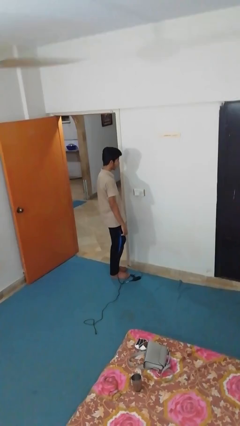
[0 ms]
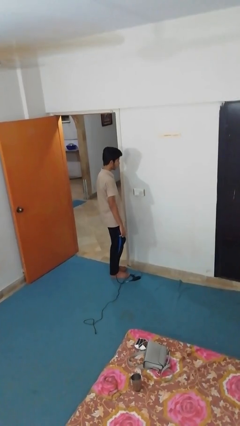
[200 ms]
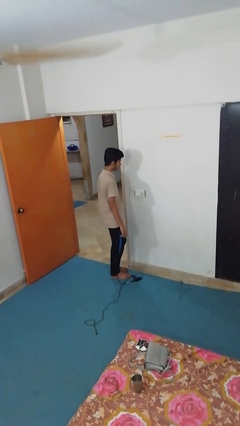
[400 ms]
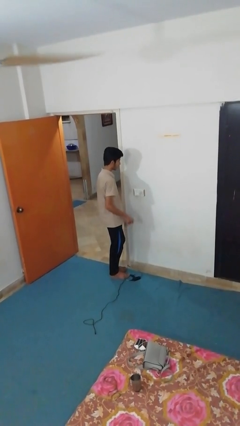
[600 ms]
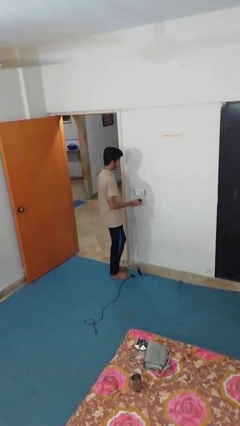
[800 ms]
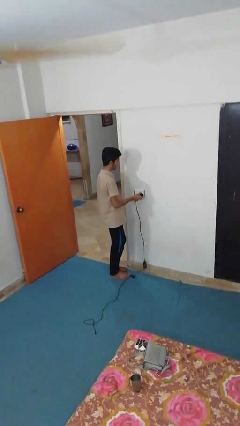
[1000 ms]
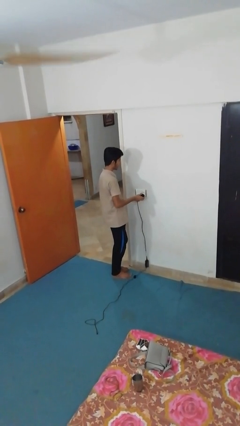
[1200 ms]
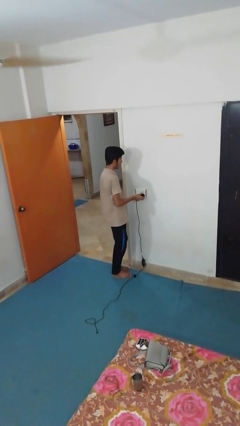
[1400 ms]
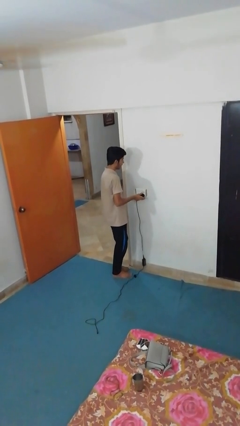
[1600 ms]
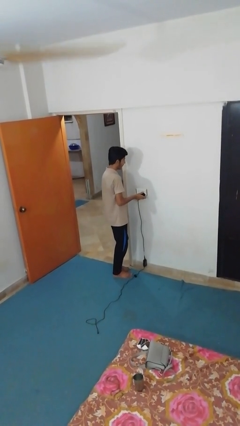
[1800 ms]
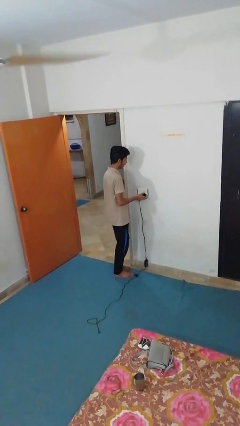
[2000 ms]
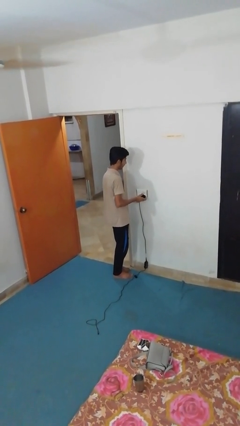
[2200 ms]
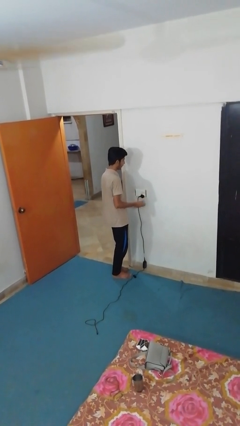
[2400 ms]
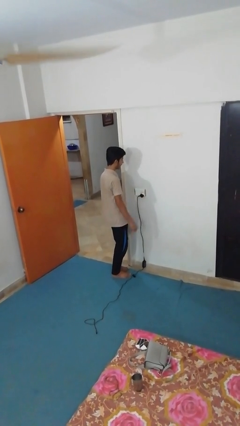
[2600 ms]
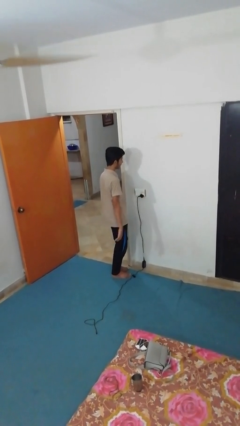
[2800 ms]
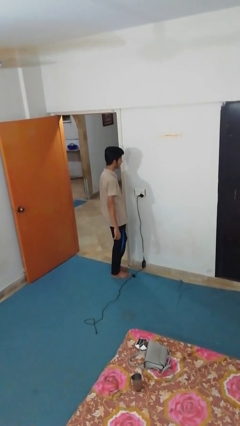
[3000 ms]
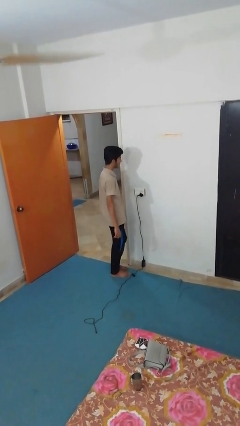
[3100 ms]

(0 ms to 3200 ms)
person plugs into electrical socket

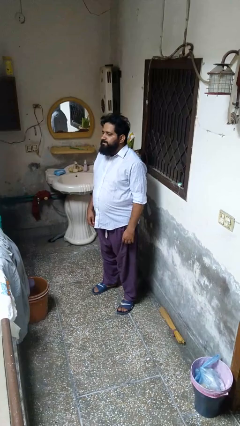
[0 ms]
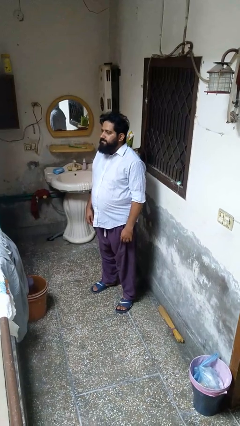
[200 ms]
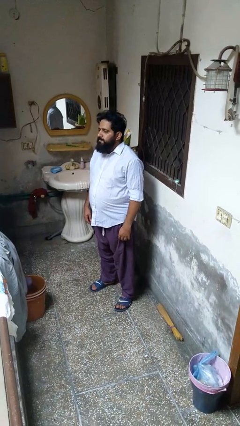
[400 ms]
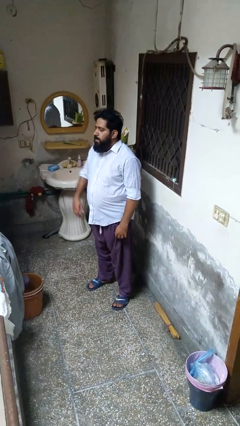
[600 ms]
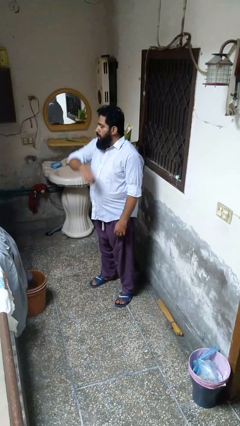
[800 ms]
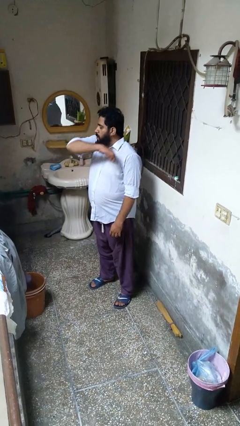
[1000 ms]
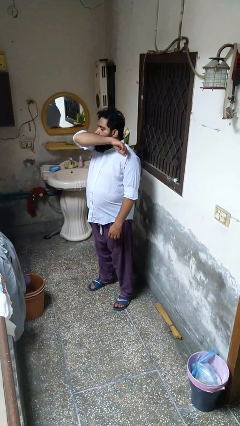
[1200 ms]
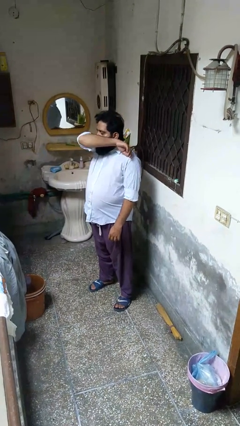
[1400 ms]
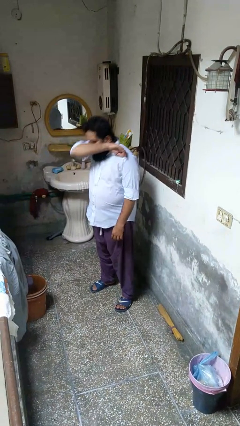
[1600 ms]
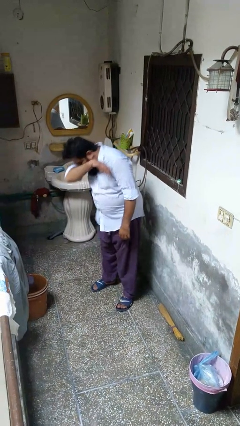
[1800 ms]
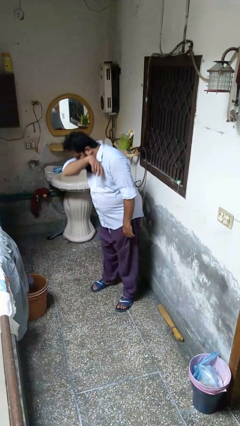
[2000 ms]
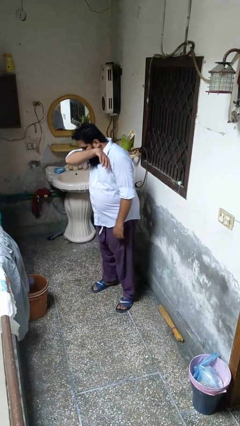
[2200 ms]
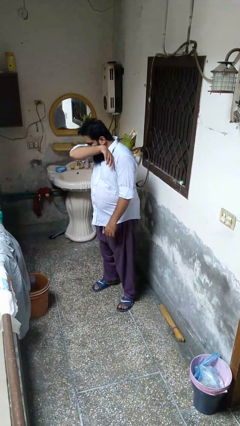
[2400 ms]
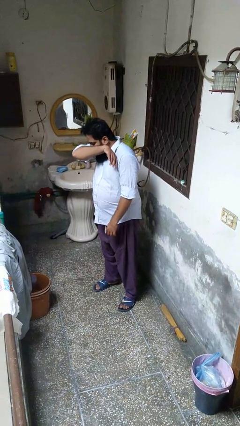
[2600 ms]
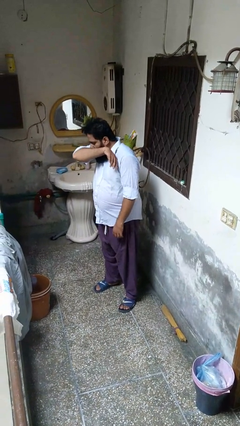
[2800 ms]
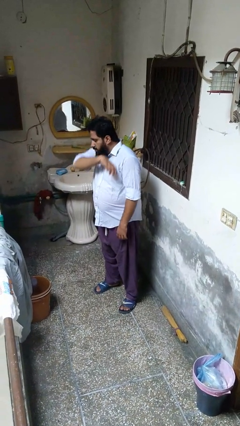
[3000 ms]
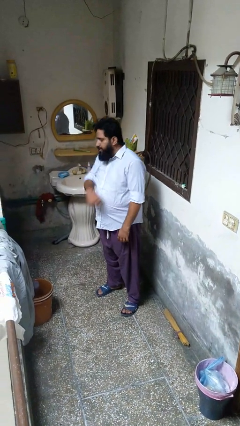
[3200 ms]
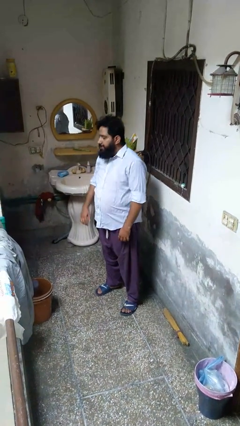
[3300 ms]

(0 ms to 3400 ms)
person sneezes into arm

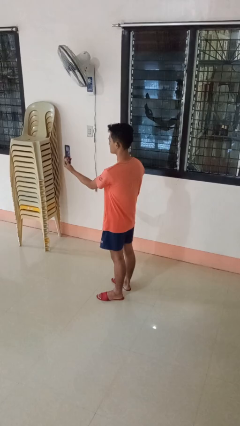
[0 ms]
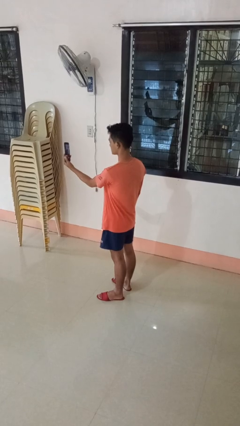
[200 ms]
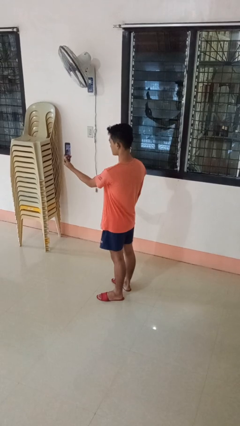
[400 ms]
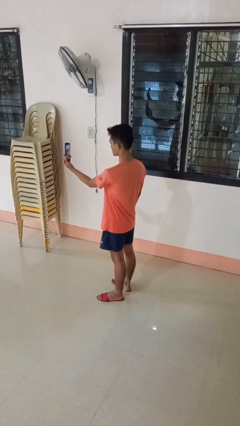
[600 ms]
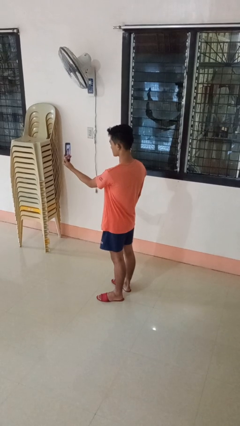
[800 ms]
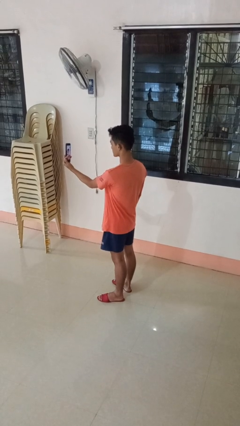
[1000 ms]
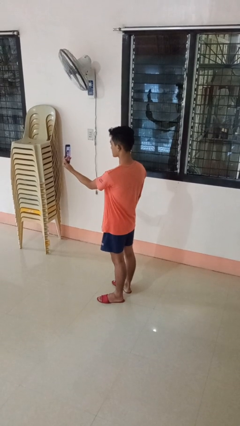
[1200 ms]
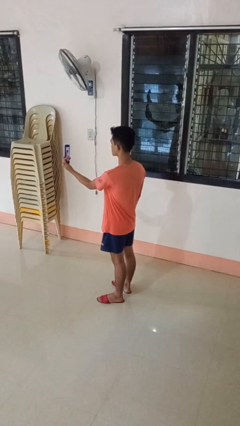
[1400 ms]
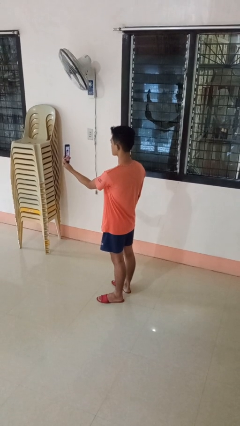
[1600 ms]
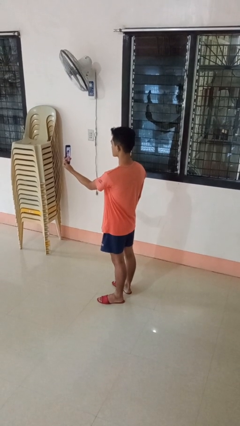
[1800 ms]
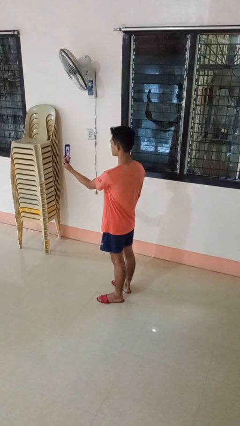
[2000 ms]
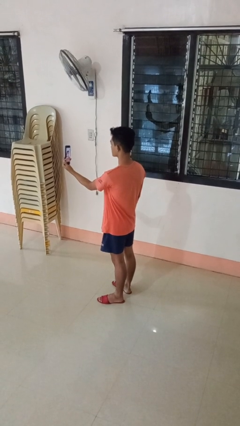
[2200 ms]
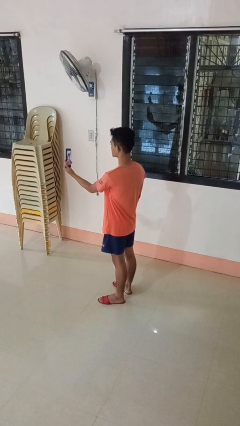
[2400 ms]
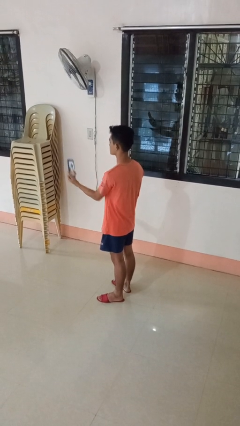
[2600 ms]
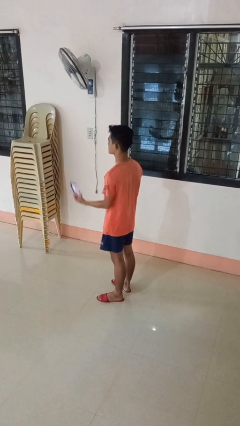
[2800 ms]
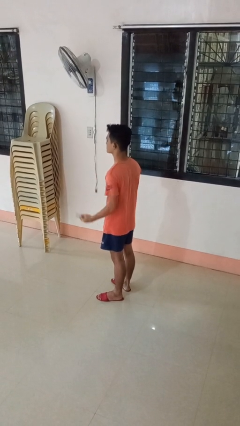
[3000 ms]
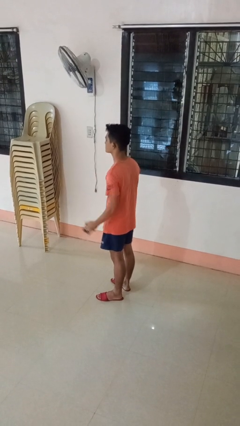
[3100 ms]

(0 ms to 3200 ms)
person takes selfie

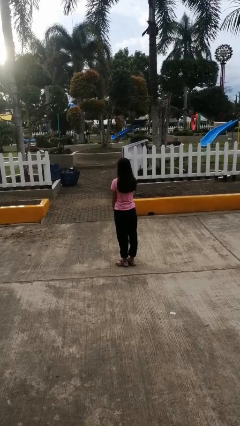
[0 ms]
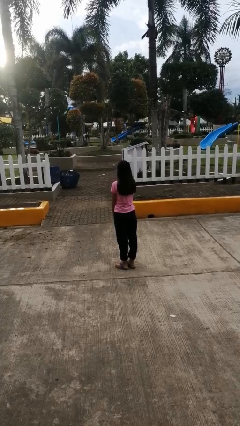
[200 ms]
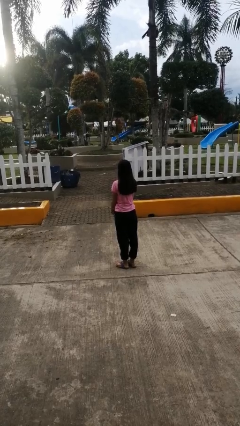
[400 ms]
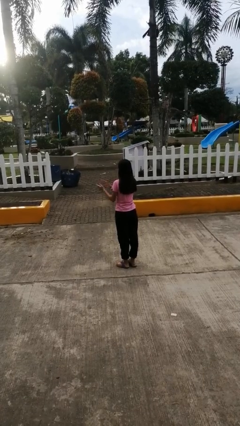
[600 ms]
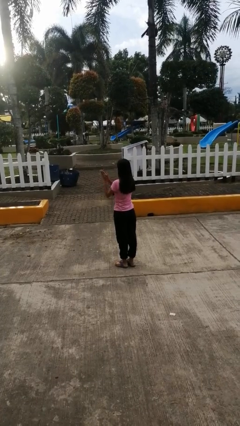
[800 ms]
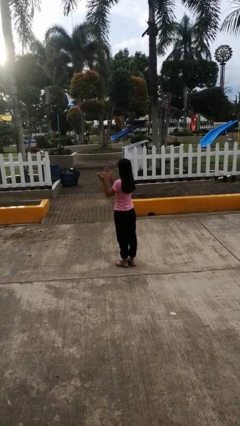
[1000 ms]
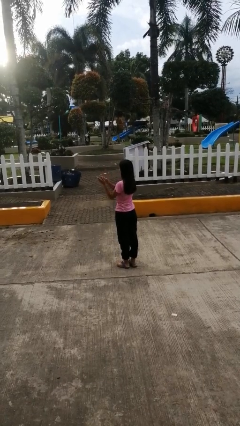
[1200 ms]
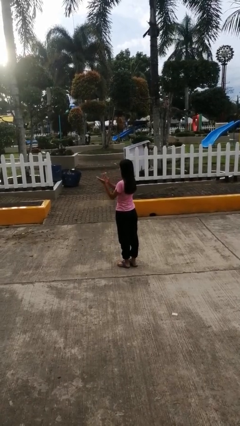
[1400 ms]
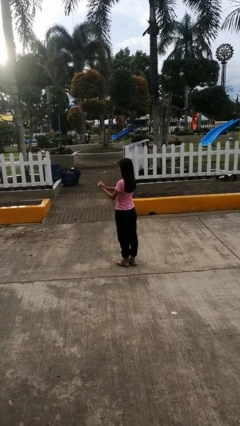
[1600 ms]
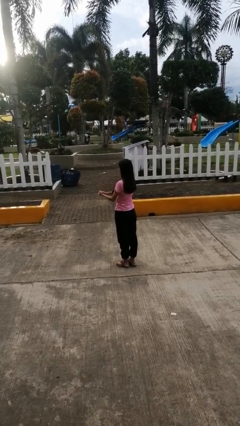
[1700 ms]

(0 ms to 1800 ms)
person claps hands

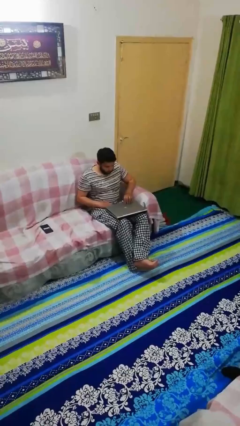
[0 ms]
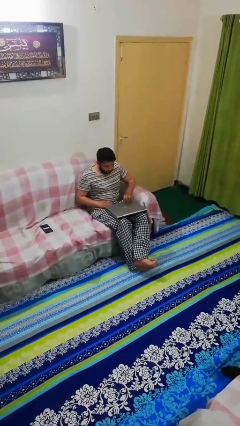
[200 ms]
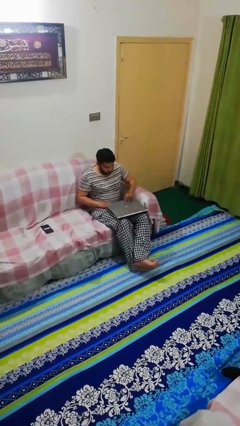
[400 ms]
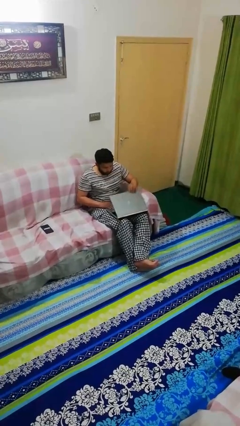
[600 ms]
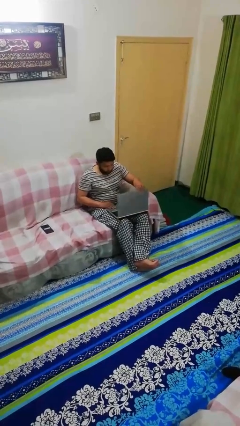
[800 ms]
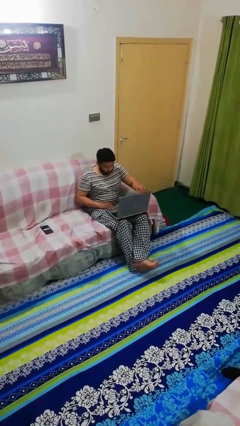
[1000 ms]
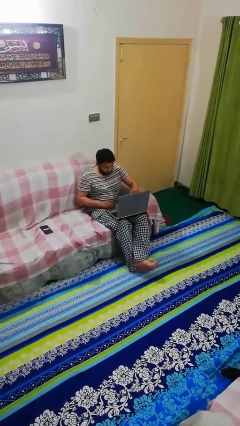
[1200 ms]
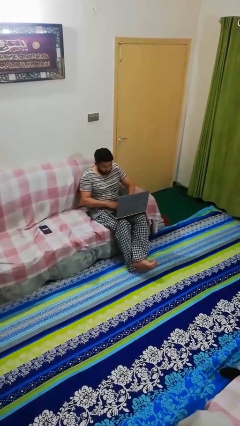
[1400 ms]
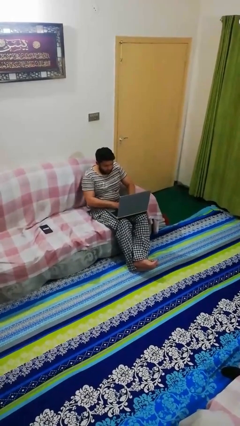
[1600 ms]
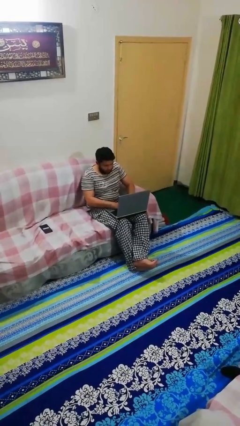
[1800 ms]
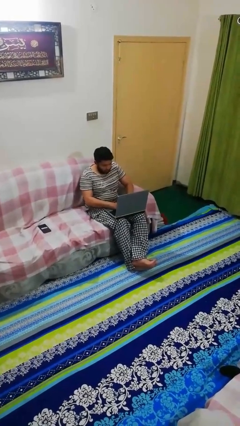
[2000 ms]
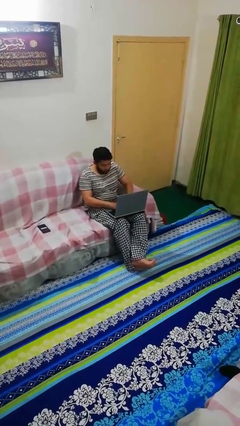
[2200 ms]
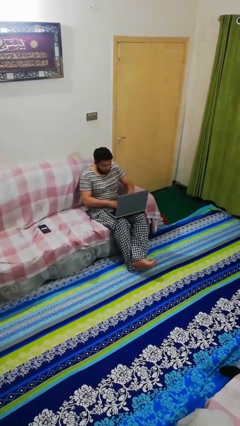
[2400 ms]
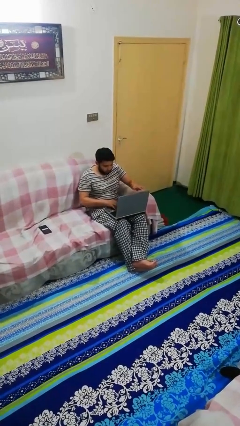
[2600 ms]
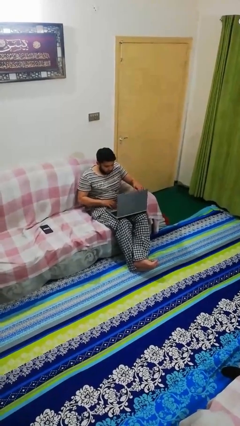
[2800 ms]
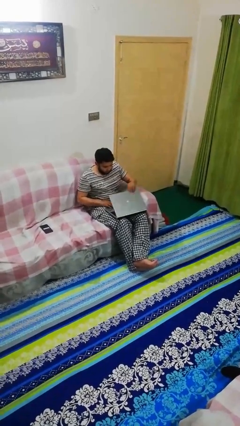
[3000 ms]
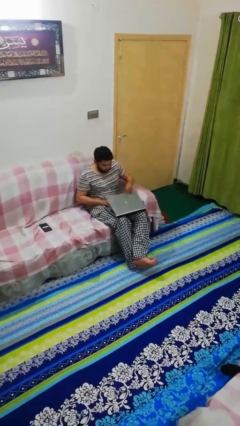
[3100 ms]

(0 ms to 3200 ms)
person interacts with laptop

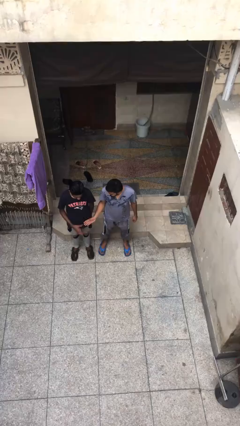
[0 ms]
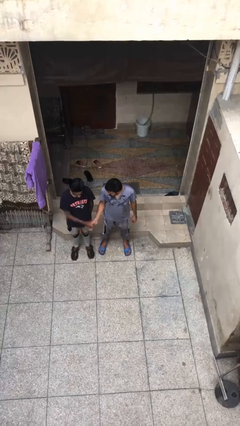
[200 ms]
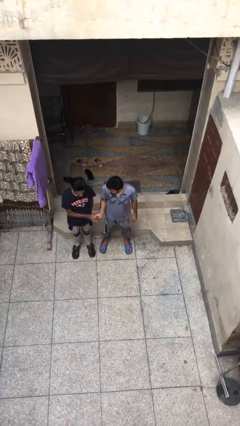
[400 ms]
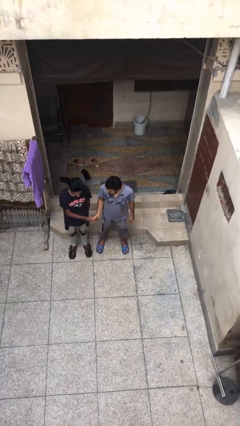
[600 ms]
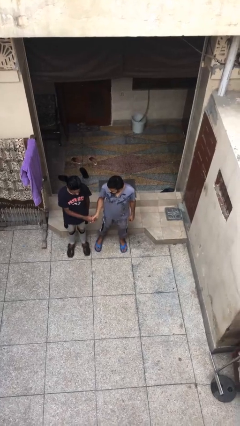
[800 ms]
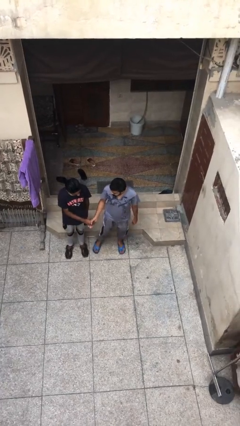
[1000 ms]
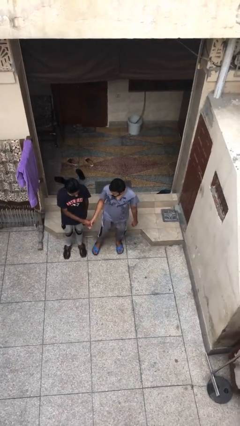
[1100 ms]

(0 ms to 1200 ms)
person shakes hand

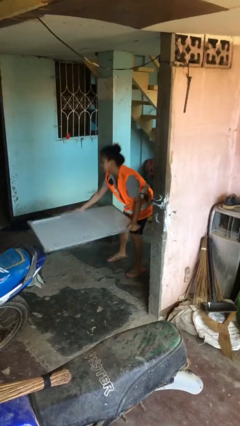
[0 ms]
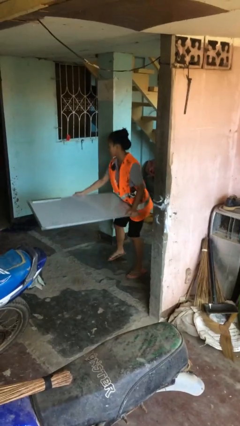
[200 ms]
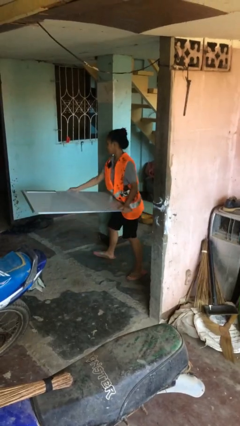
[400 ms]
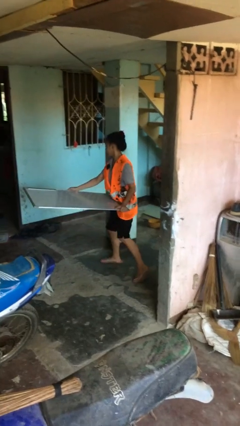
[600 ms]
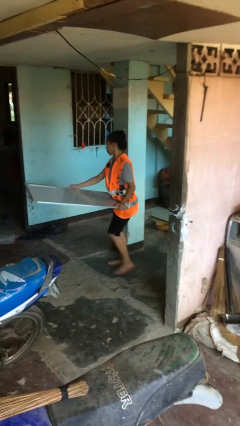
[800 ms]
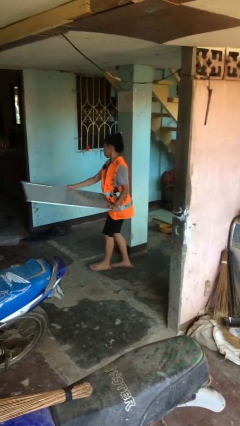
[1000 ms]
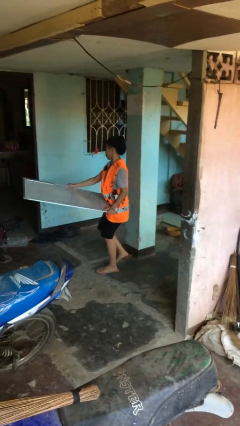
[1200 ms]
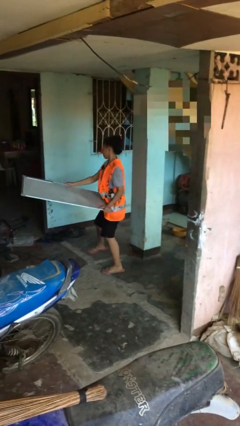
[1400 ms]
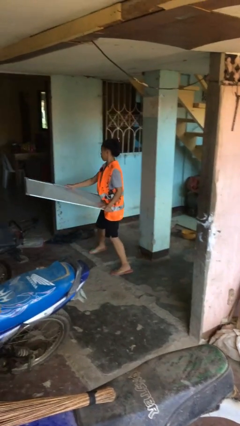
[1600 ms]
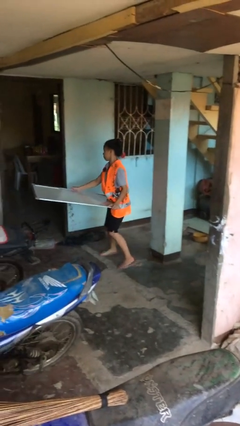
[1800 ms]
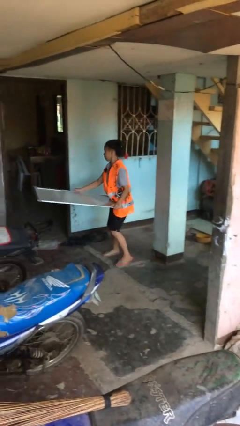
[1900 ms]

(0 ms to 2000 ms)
person carries heavy object
